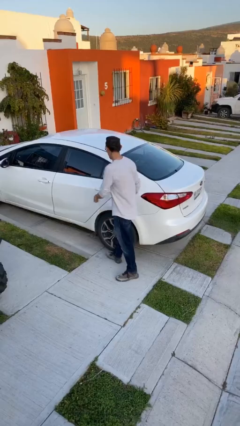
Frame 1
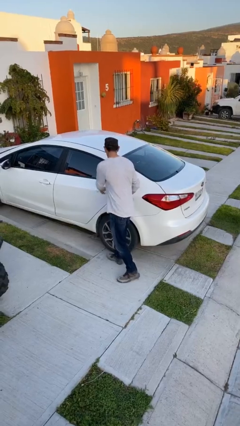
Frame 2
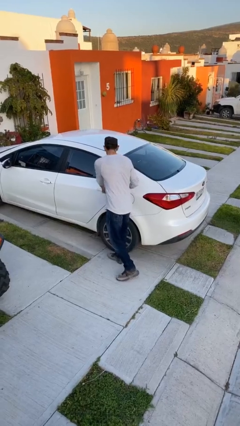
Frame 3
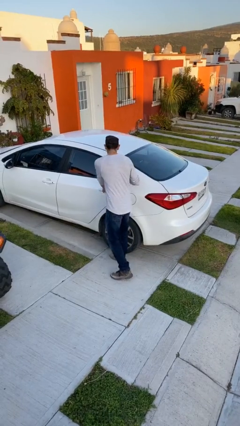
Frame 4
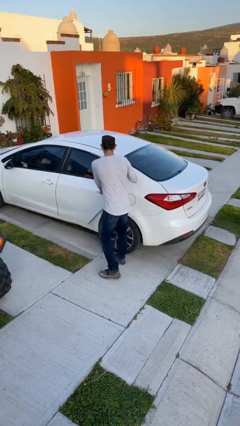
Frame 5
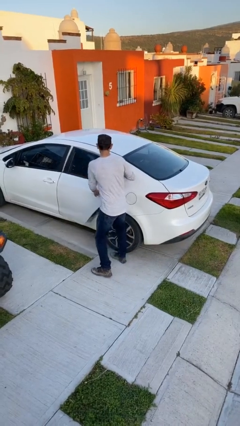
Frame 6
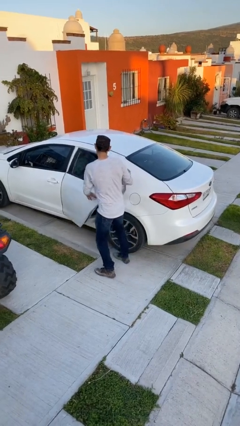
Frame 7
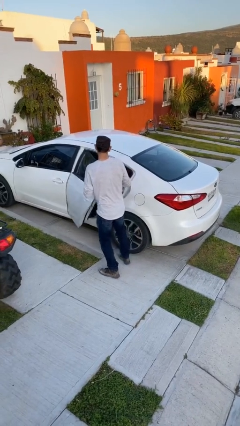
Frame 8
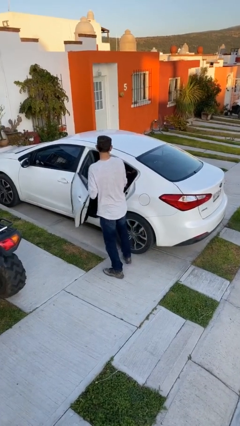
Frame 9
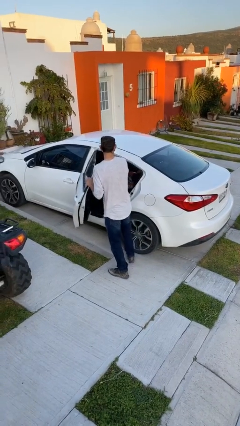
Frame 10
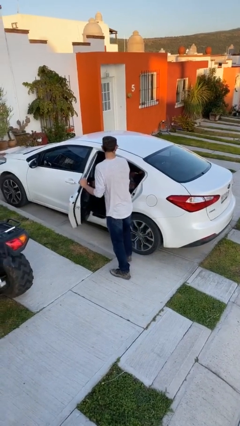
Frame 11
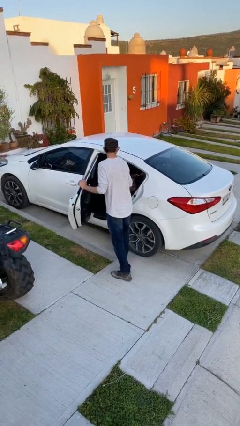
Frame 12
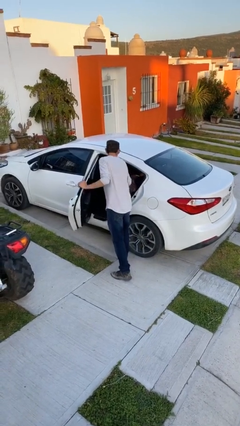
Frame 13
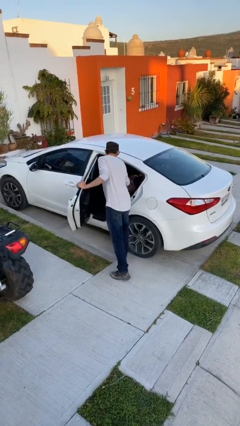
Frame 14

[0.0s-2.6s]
person opens car door

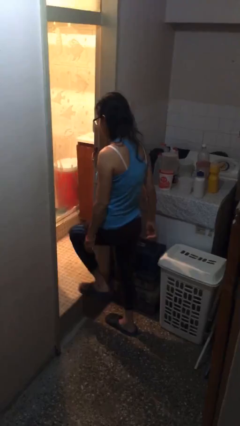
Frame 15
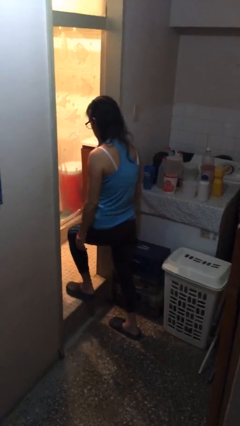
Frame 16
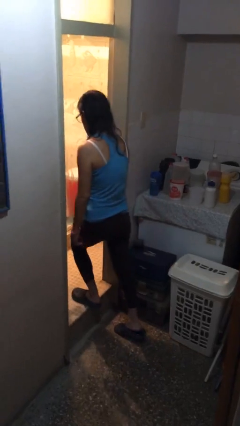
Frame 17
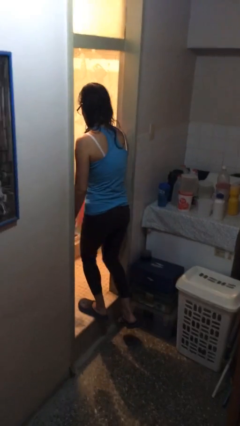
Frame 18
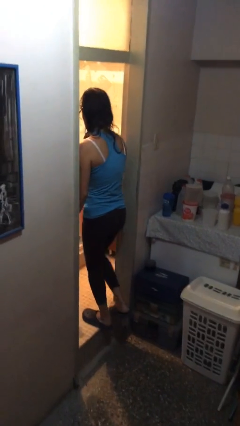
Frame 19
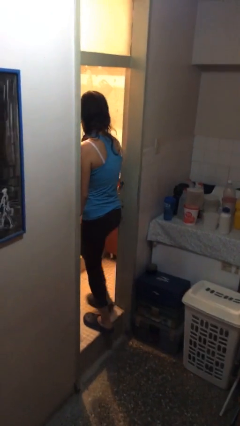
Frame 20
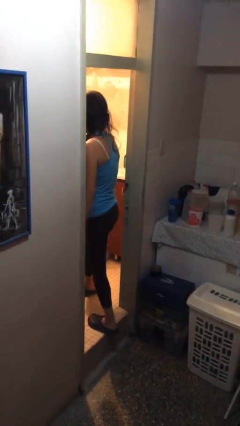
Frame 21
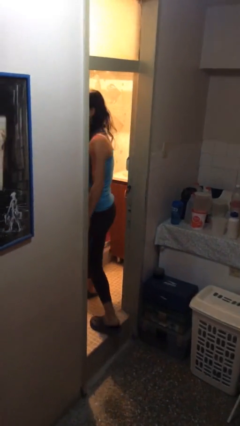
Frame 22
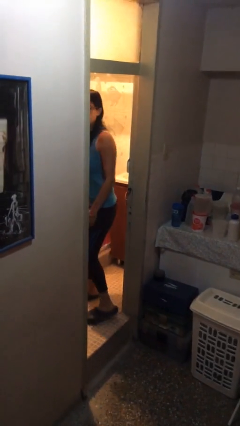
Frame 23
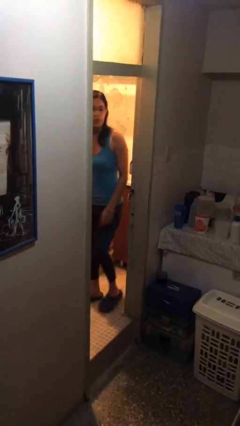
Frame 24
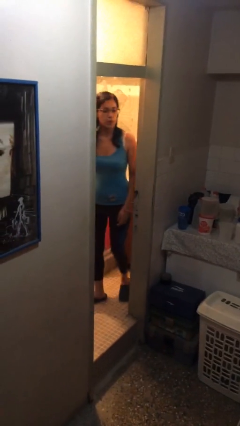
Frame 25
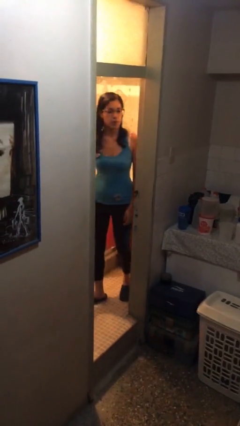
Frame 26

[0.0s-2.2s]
person exits scene through structure

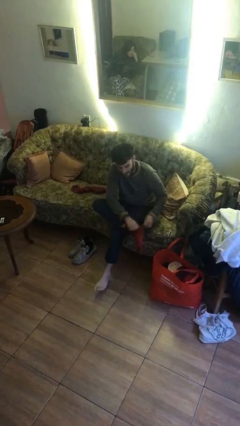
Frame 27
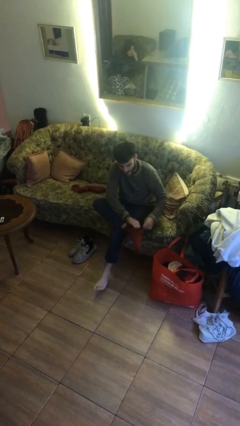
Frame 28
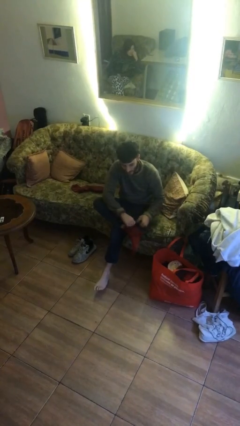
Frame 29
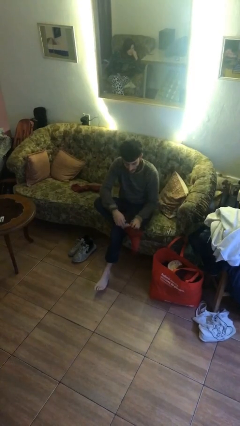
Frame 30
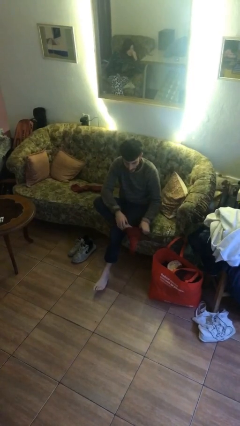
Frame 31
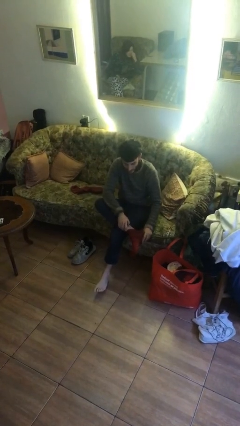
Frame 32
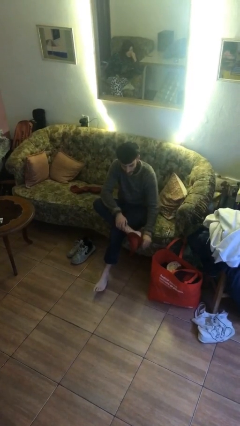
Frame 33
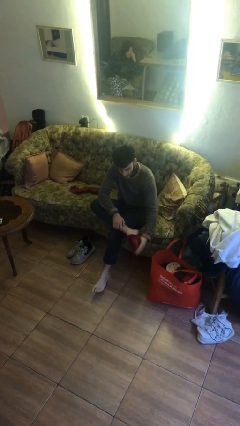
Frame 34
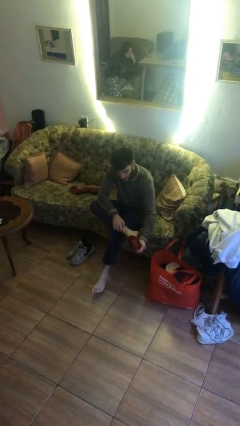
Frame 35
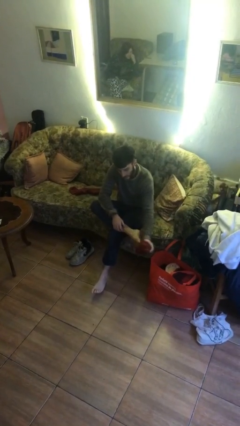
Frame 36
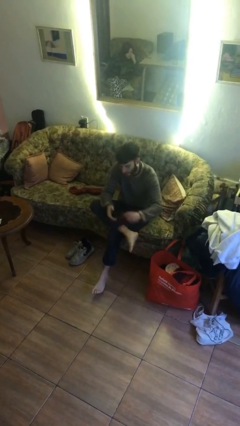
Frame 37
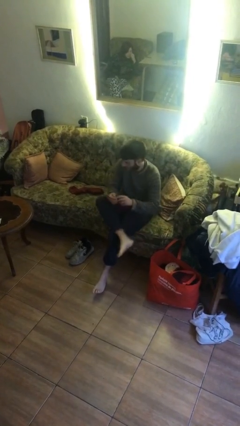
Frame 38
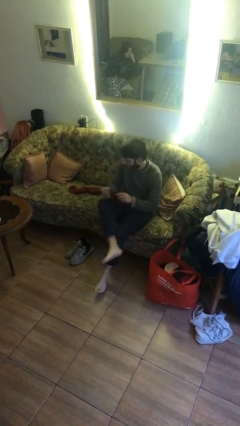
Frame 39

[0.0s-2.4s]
person takes off socks

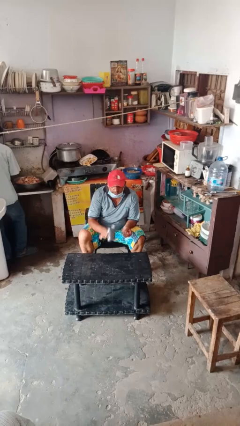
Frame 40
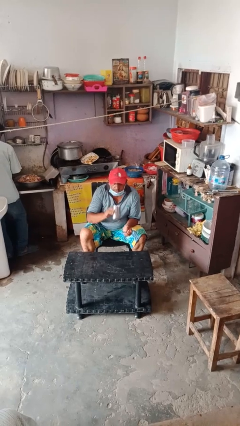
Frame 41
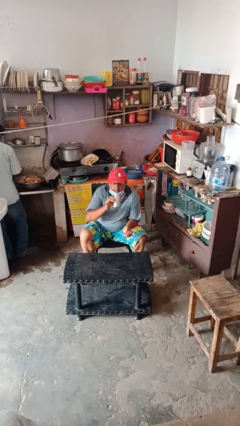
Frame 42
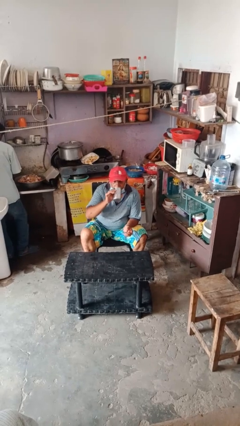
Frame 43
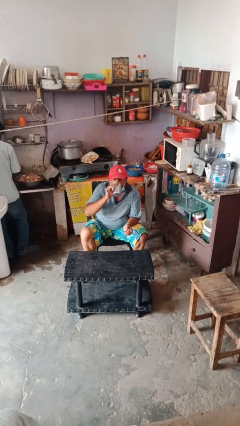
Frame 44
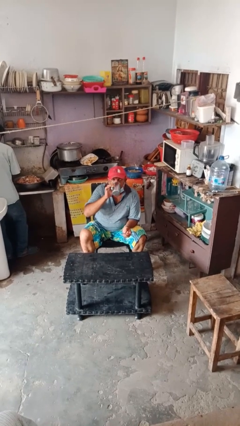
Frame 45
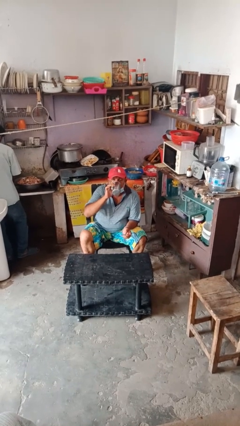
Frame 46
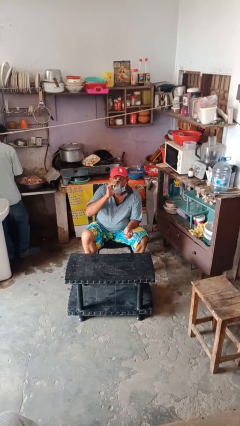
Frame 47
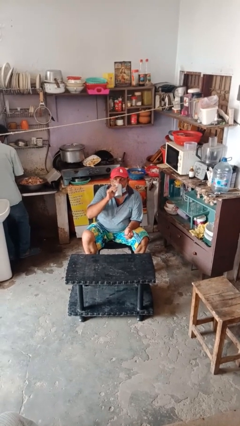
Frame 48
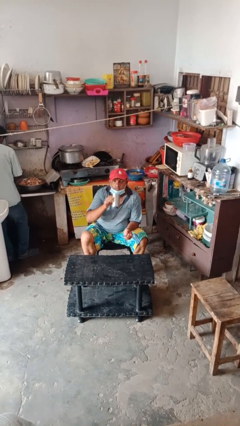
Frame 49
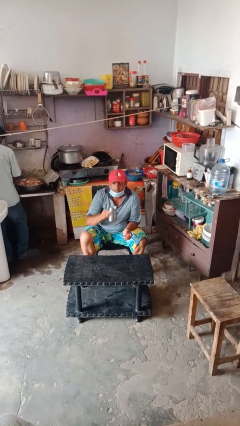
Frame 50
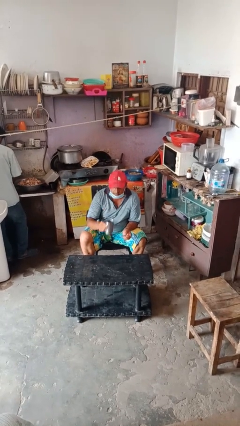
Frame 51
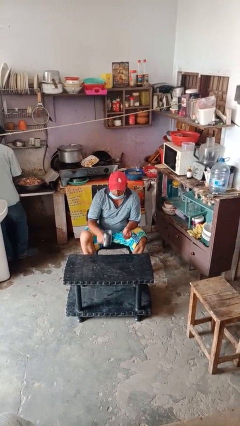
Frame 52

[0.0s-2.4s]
person drinks from cup

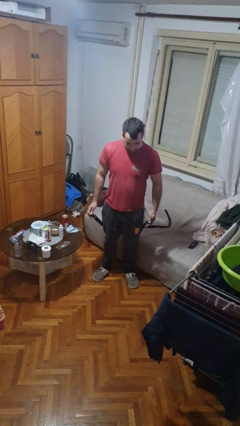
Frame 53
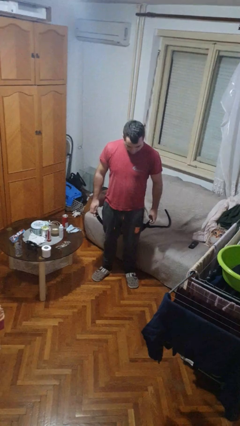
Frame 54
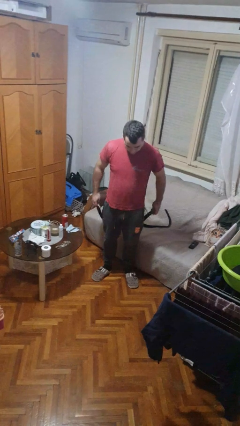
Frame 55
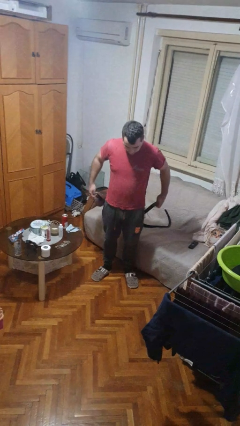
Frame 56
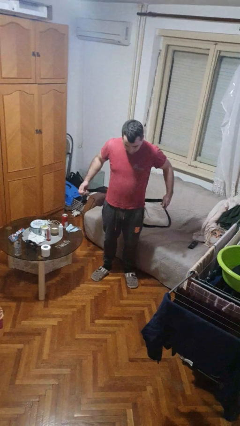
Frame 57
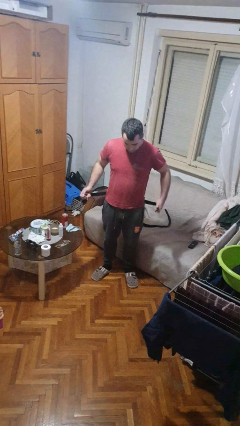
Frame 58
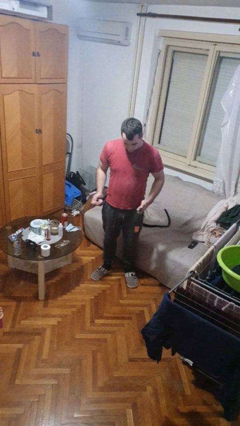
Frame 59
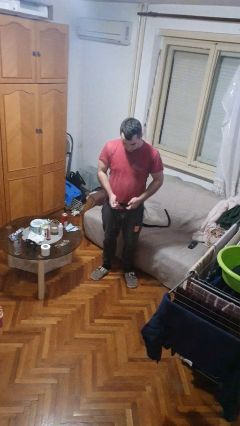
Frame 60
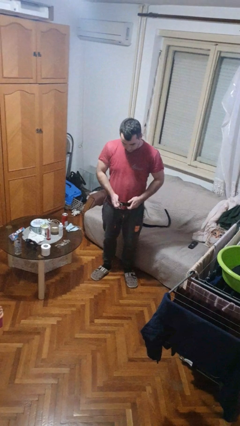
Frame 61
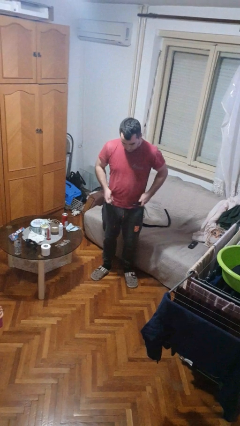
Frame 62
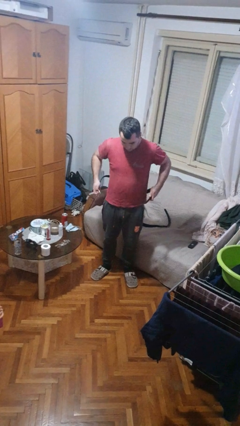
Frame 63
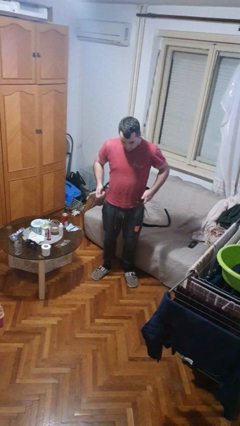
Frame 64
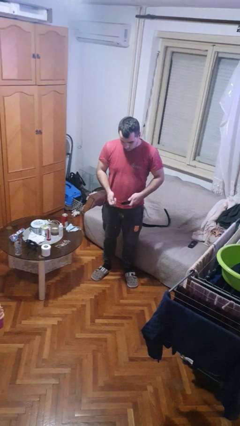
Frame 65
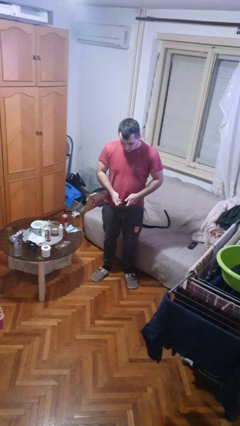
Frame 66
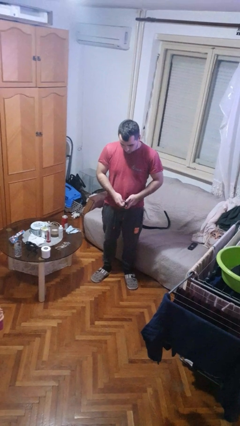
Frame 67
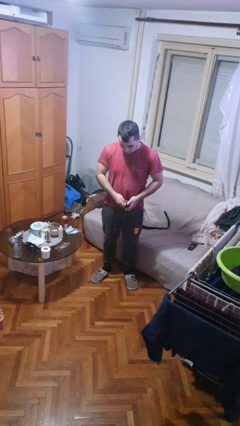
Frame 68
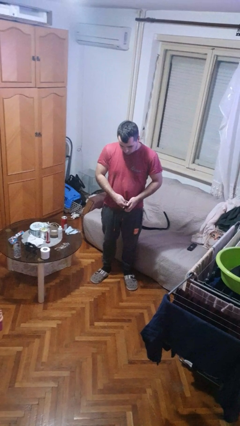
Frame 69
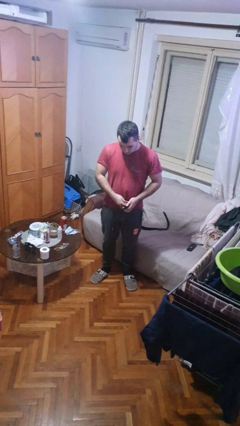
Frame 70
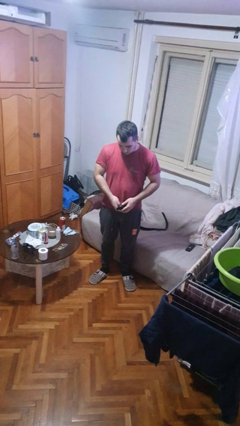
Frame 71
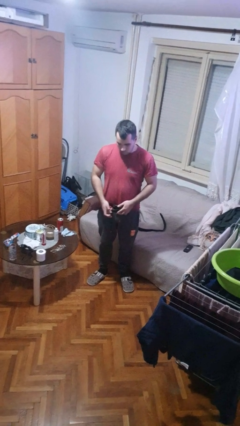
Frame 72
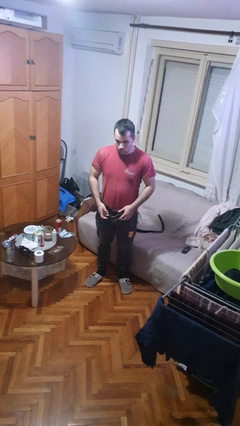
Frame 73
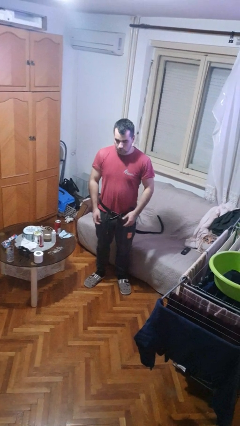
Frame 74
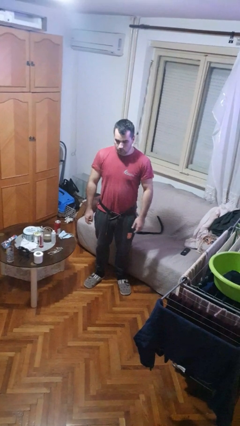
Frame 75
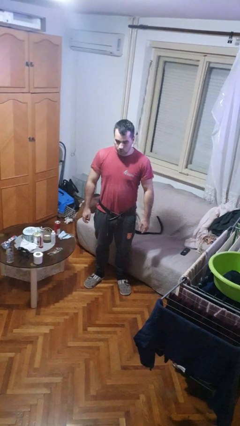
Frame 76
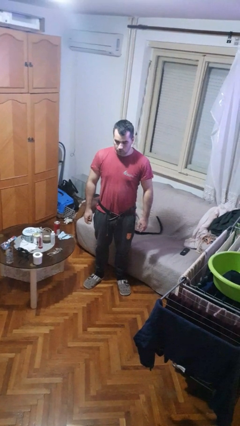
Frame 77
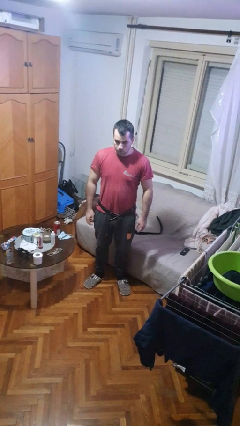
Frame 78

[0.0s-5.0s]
person puts on belt

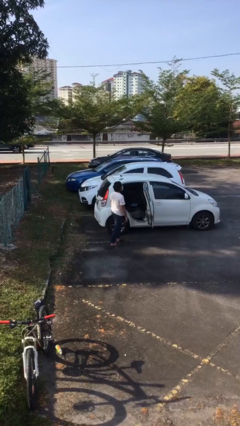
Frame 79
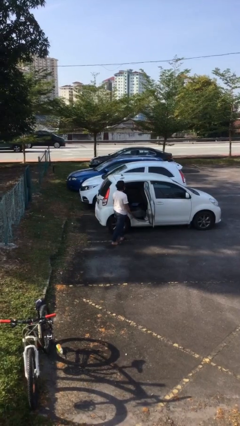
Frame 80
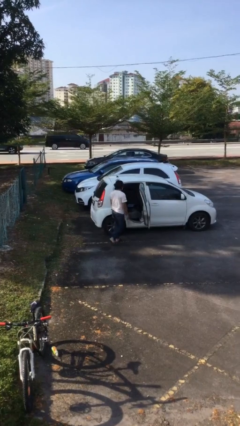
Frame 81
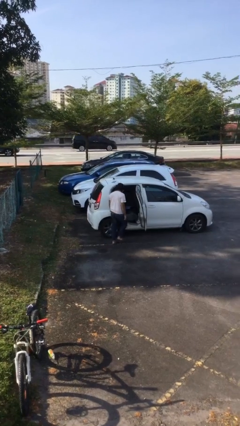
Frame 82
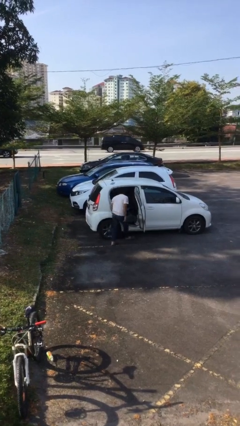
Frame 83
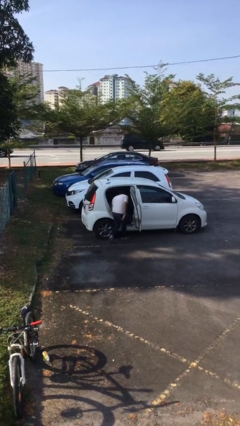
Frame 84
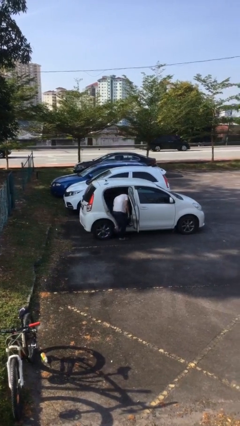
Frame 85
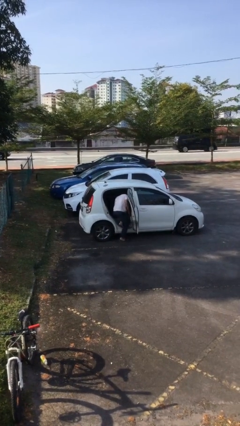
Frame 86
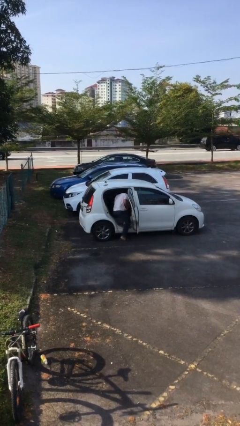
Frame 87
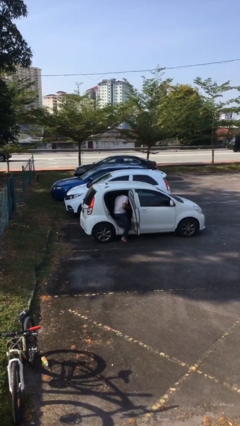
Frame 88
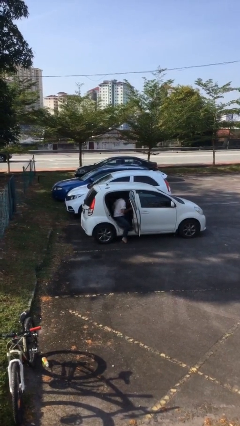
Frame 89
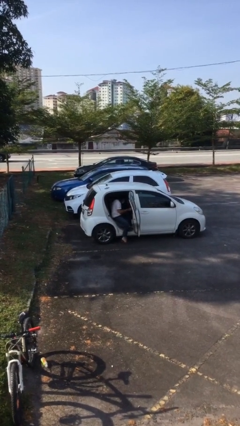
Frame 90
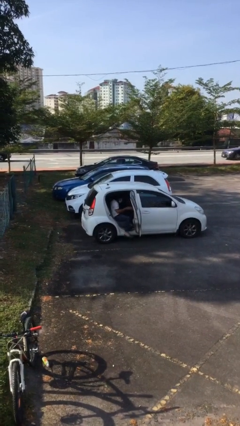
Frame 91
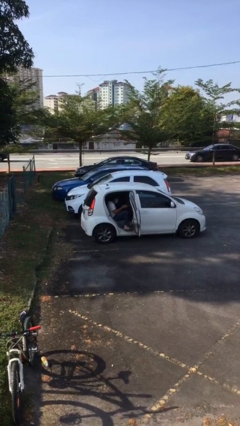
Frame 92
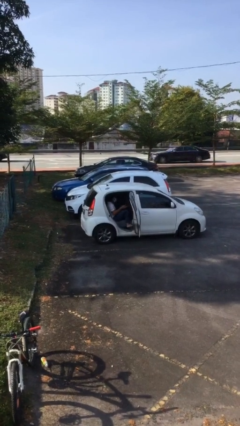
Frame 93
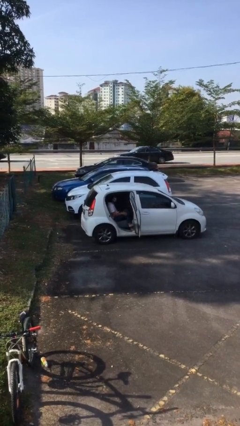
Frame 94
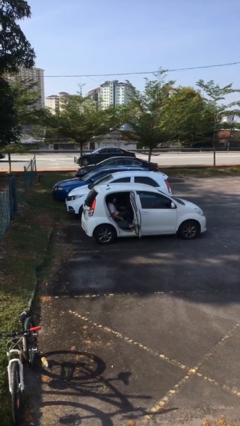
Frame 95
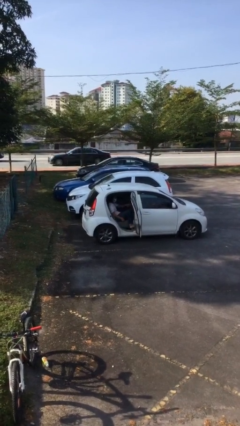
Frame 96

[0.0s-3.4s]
person enters car
